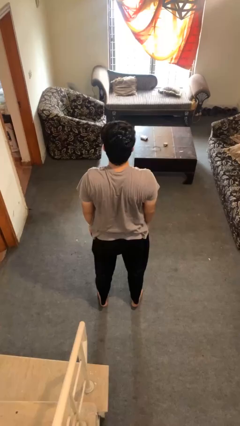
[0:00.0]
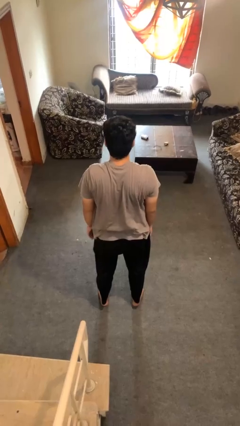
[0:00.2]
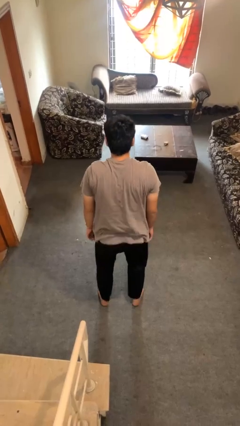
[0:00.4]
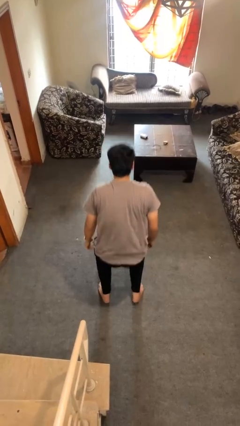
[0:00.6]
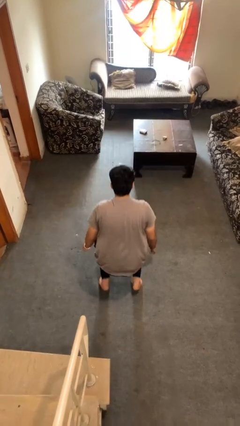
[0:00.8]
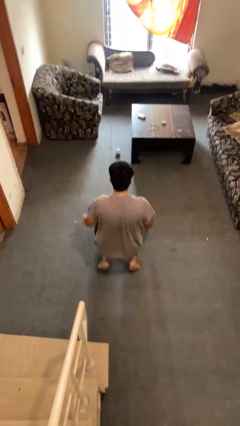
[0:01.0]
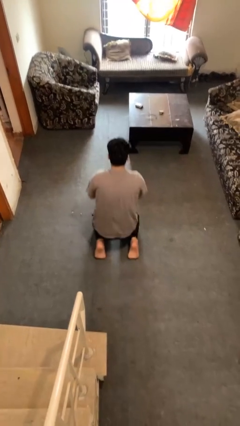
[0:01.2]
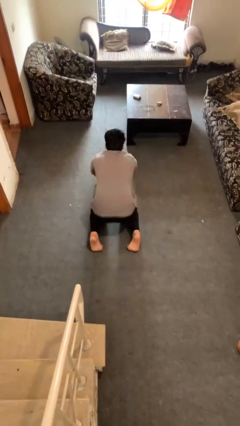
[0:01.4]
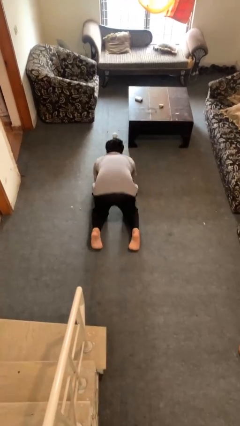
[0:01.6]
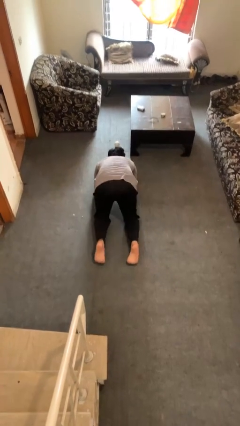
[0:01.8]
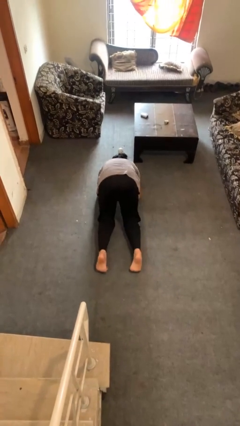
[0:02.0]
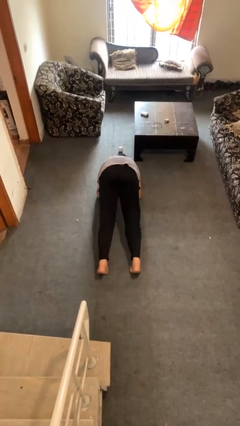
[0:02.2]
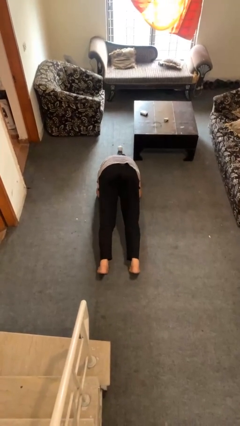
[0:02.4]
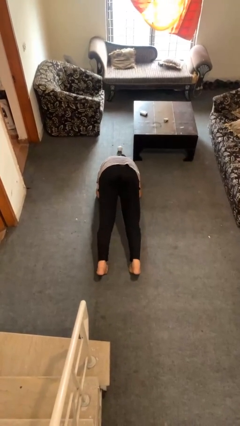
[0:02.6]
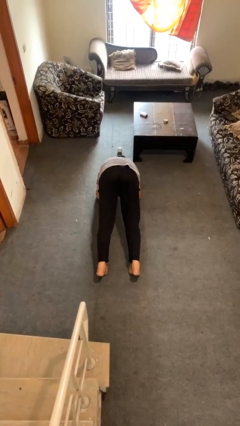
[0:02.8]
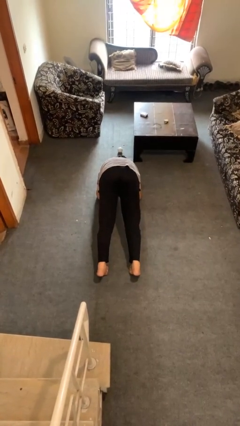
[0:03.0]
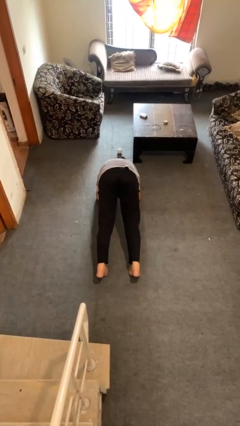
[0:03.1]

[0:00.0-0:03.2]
person exercises with plank

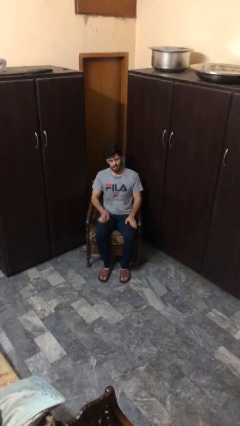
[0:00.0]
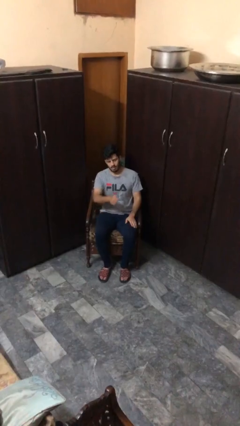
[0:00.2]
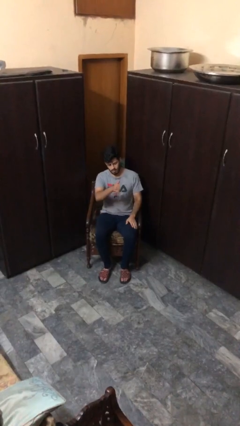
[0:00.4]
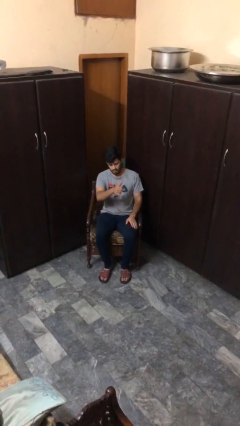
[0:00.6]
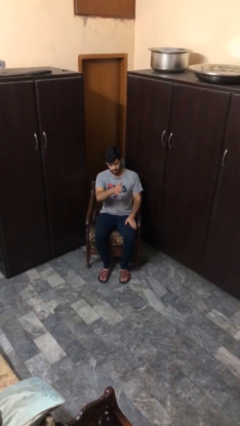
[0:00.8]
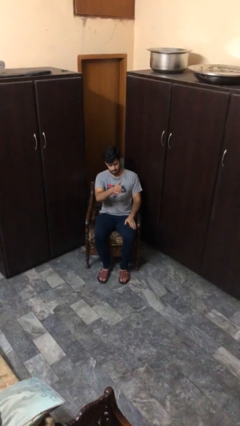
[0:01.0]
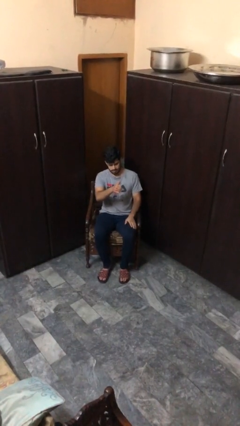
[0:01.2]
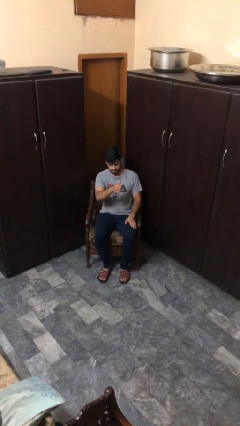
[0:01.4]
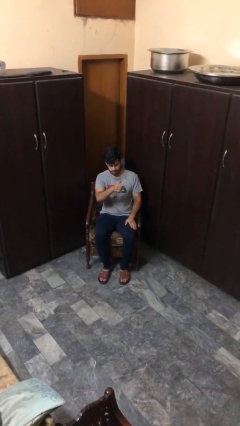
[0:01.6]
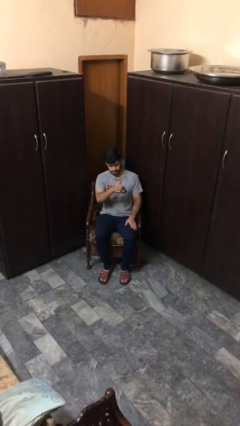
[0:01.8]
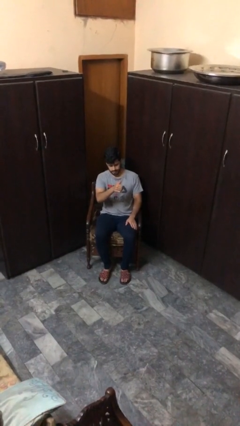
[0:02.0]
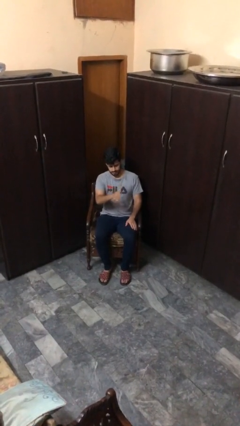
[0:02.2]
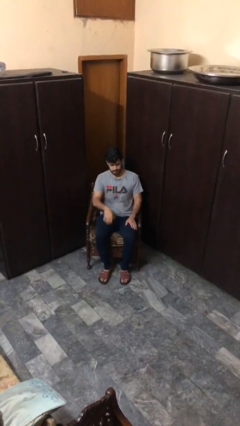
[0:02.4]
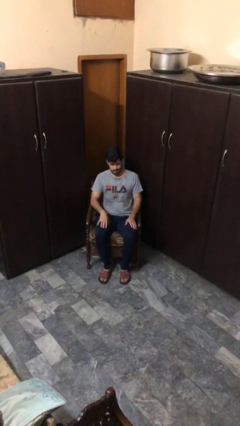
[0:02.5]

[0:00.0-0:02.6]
person gestures thumbs up

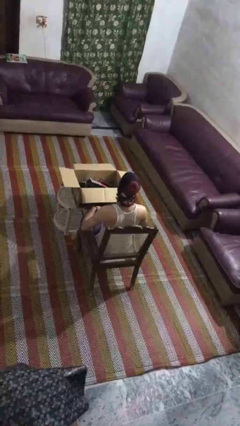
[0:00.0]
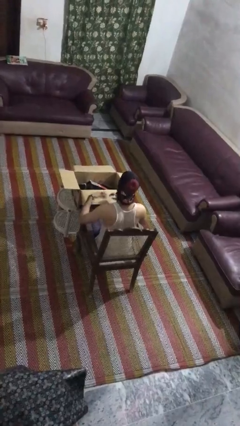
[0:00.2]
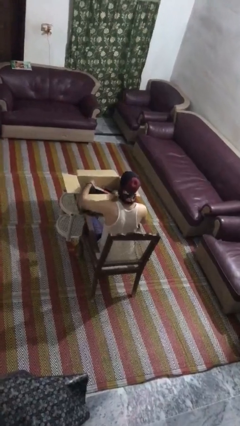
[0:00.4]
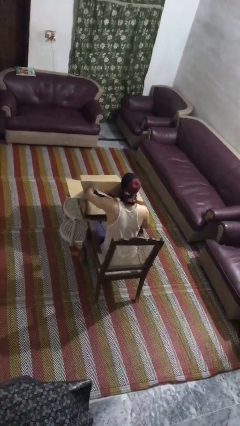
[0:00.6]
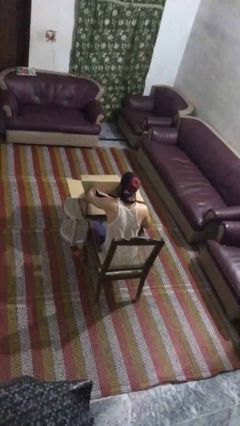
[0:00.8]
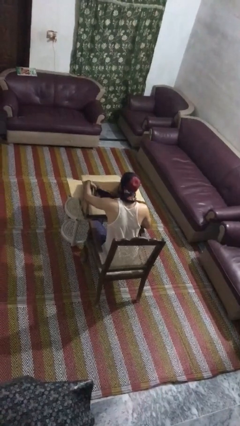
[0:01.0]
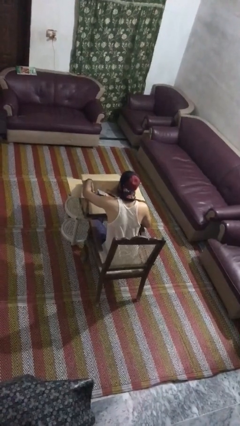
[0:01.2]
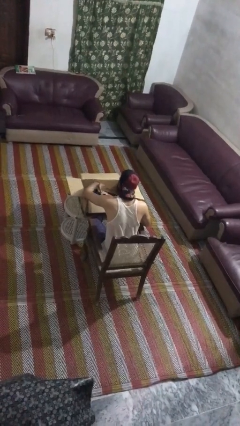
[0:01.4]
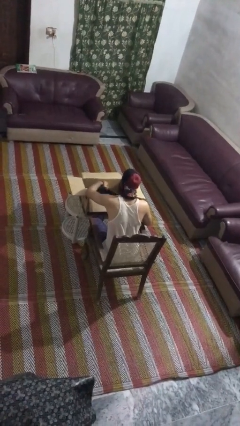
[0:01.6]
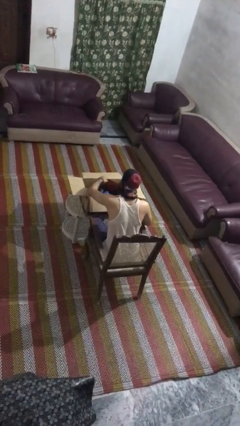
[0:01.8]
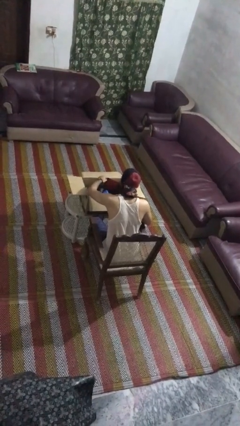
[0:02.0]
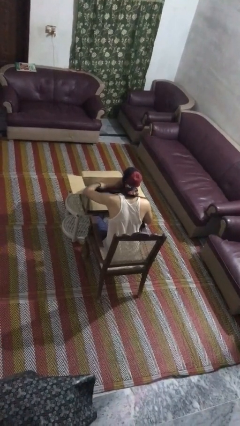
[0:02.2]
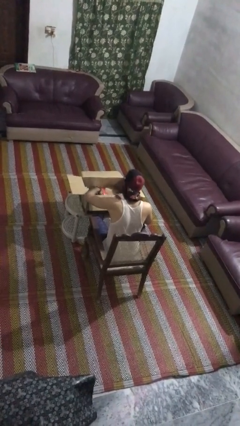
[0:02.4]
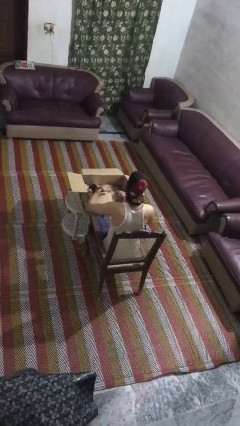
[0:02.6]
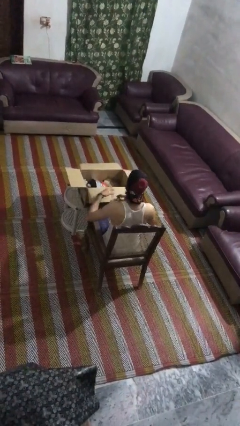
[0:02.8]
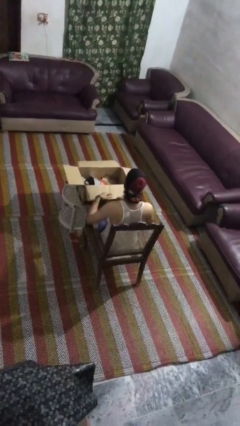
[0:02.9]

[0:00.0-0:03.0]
person searches in box

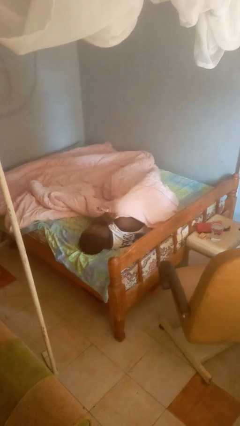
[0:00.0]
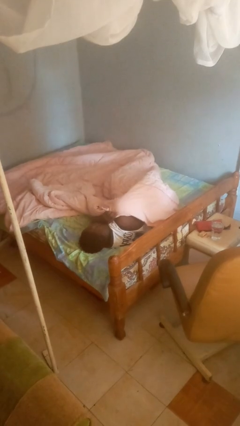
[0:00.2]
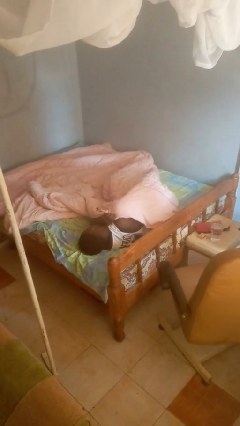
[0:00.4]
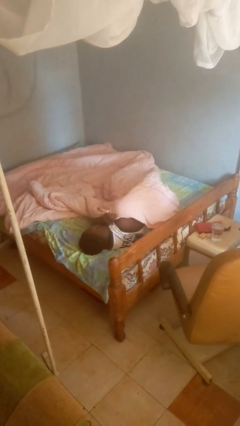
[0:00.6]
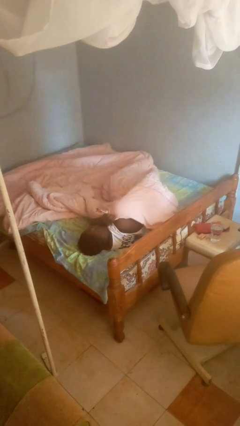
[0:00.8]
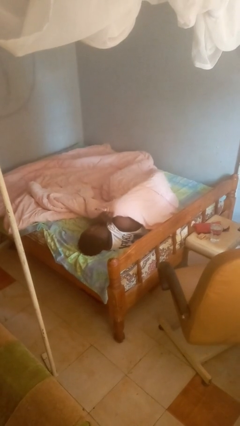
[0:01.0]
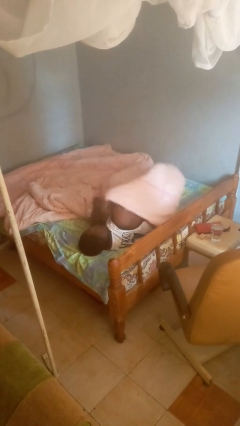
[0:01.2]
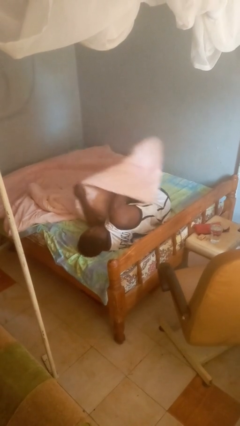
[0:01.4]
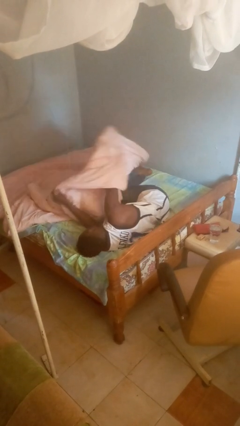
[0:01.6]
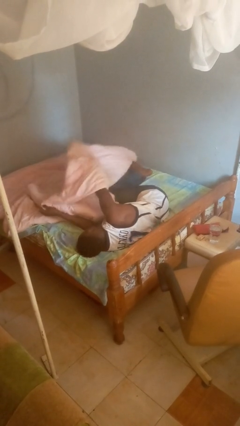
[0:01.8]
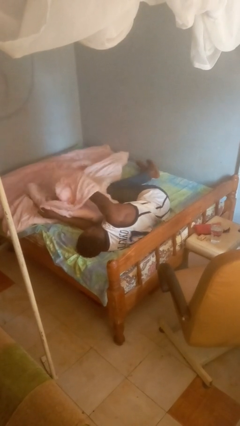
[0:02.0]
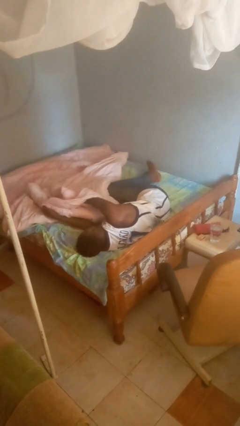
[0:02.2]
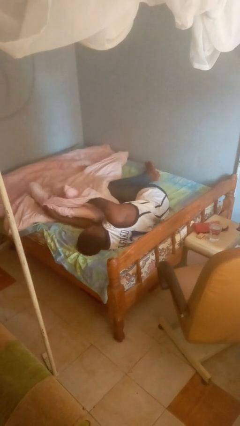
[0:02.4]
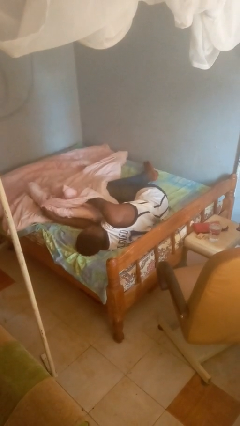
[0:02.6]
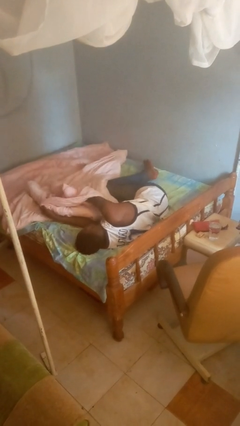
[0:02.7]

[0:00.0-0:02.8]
person uncovers with blanket

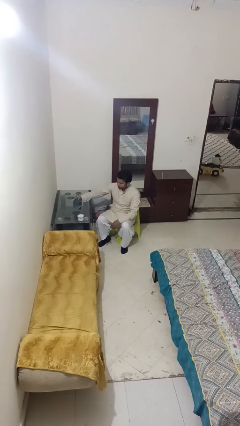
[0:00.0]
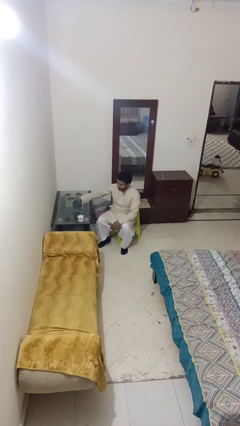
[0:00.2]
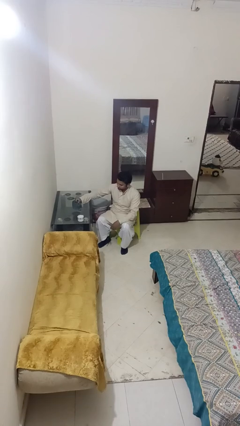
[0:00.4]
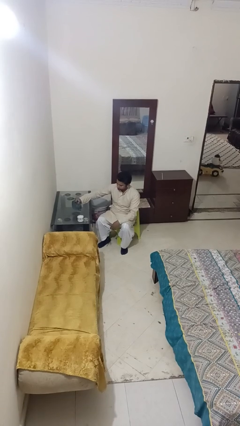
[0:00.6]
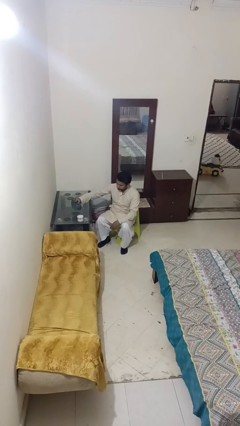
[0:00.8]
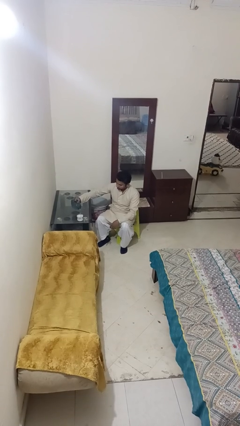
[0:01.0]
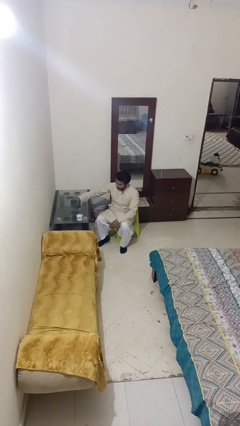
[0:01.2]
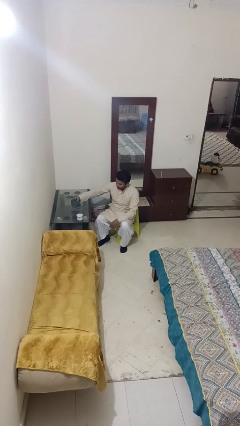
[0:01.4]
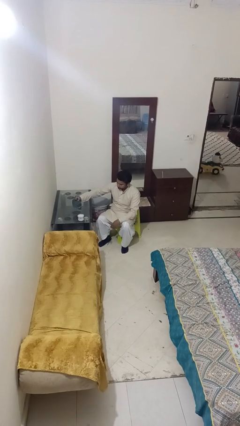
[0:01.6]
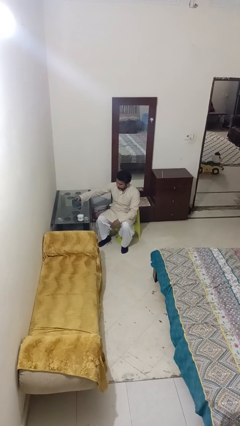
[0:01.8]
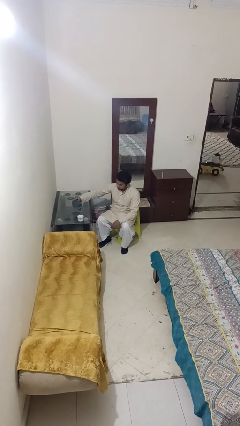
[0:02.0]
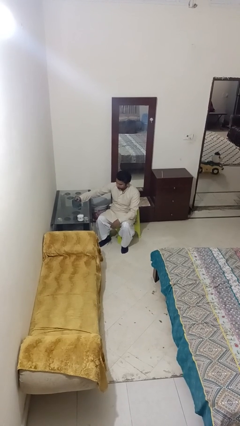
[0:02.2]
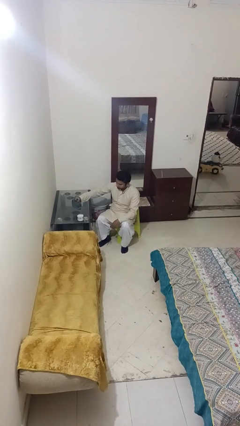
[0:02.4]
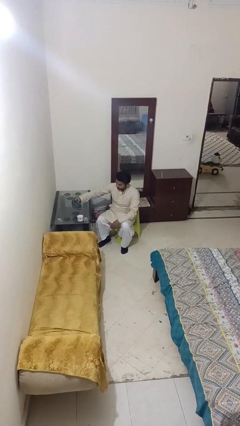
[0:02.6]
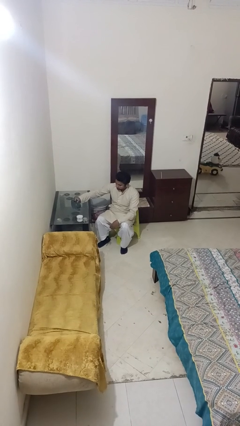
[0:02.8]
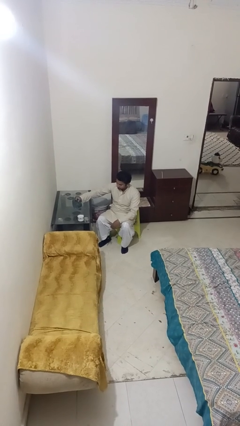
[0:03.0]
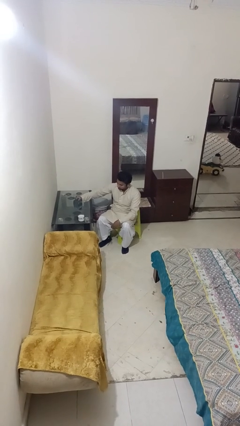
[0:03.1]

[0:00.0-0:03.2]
person pours liquid into cup

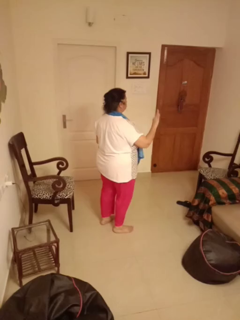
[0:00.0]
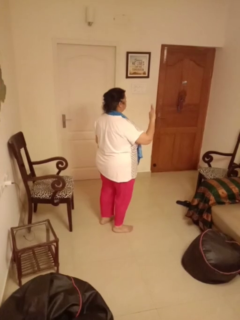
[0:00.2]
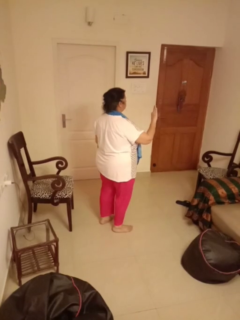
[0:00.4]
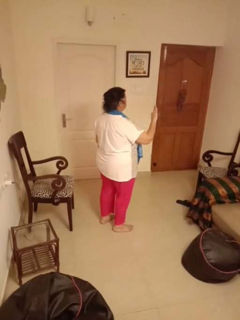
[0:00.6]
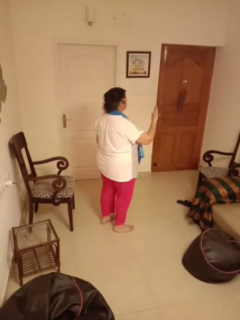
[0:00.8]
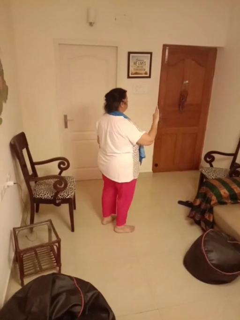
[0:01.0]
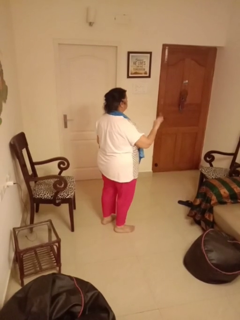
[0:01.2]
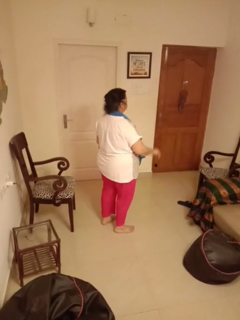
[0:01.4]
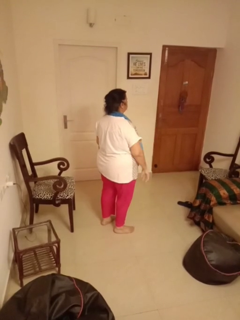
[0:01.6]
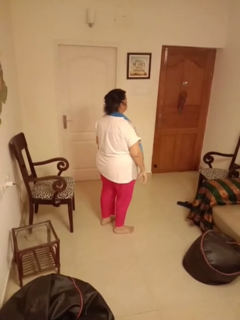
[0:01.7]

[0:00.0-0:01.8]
person gestures number three

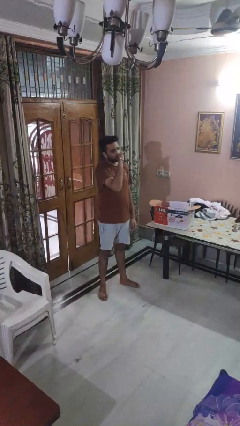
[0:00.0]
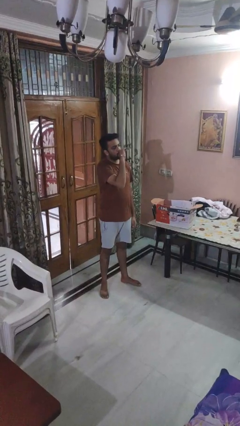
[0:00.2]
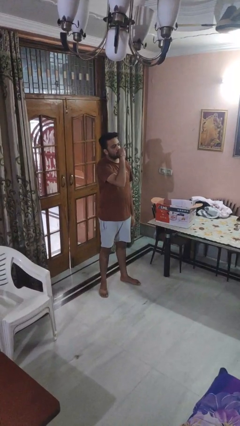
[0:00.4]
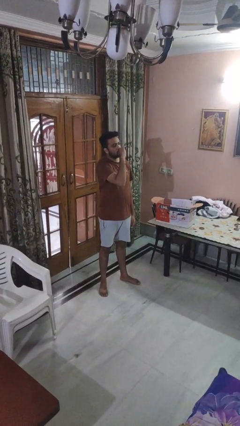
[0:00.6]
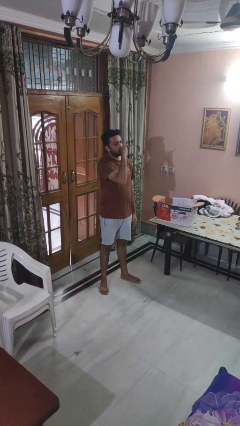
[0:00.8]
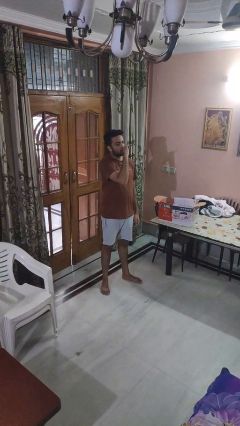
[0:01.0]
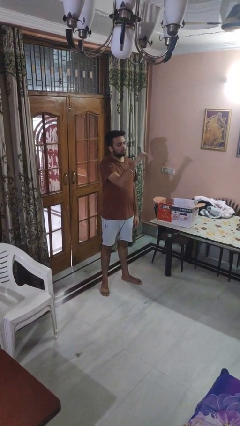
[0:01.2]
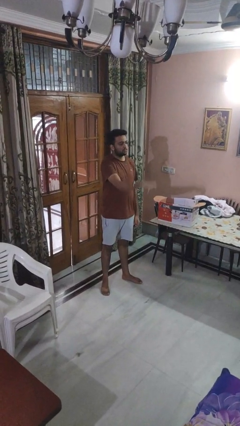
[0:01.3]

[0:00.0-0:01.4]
person vapes
